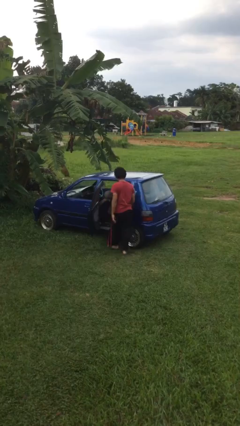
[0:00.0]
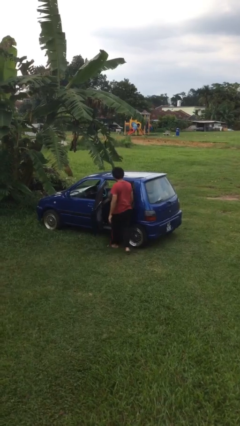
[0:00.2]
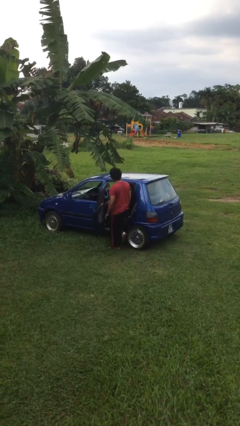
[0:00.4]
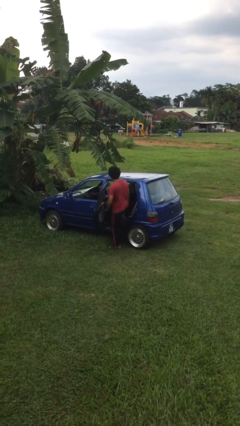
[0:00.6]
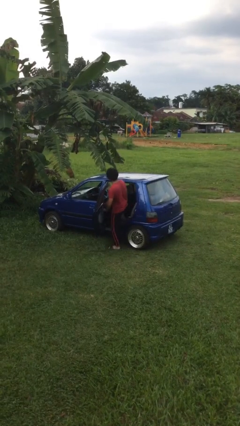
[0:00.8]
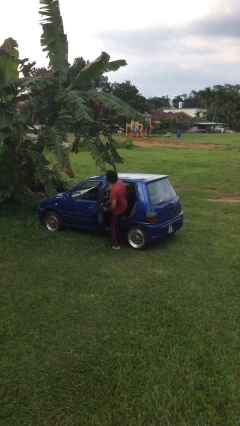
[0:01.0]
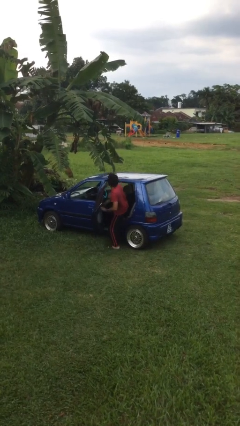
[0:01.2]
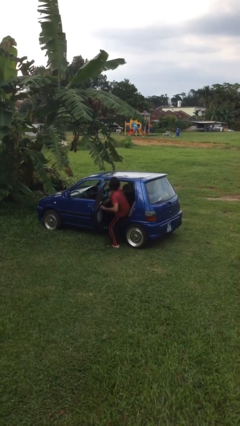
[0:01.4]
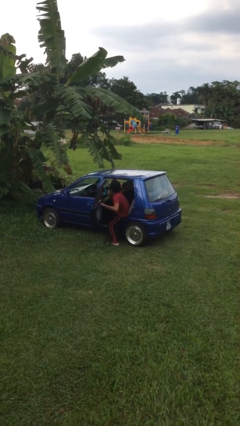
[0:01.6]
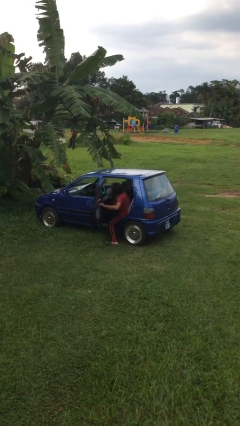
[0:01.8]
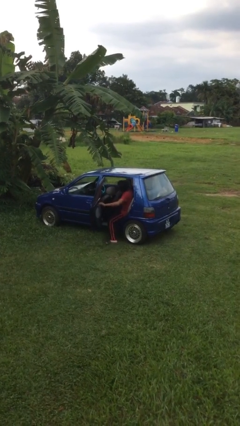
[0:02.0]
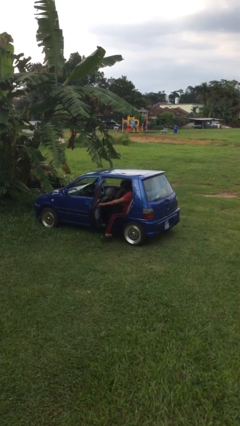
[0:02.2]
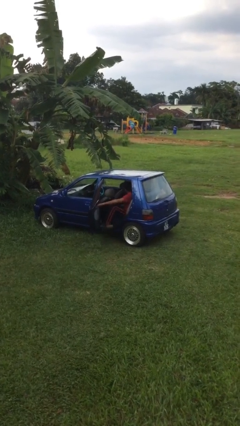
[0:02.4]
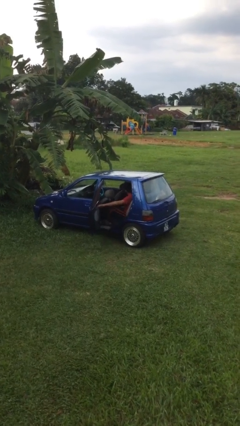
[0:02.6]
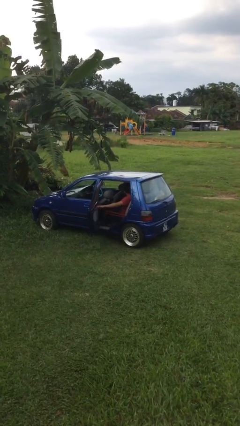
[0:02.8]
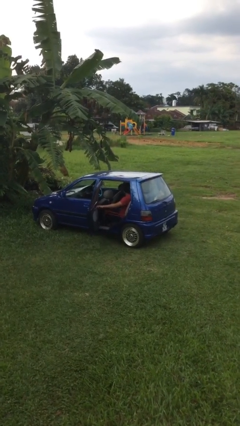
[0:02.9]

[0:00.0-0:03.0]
person enters car

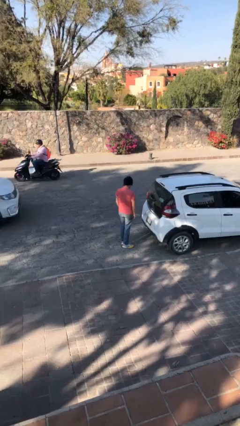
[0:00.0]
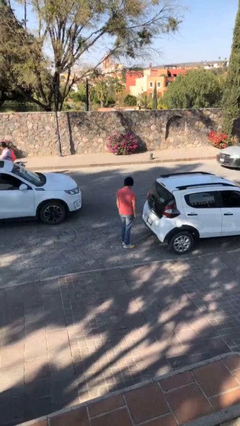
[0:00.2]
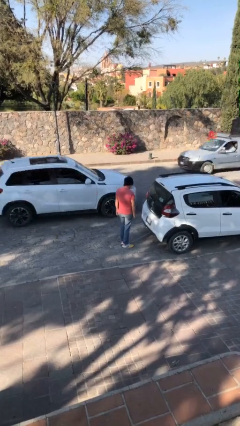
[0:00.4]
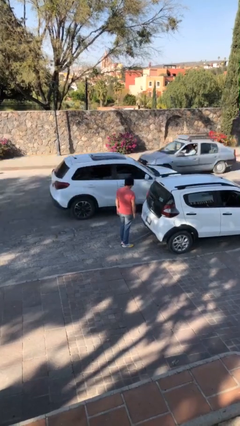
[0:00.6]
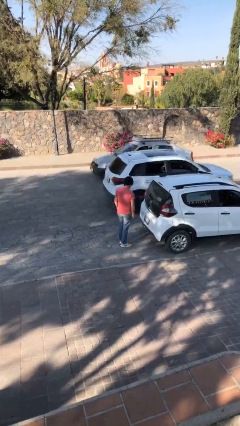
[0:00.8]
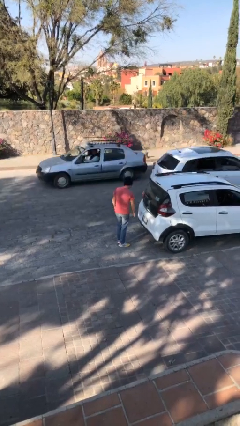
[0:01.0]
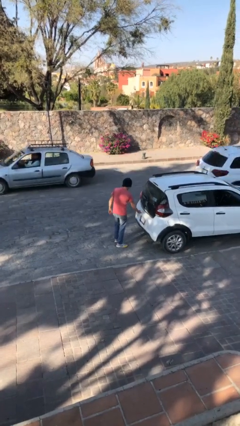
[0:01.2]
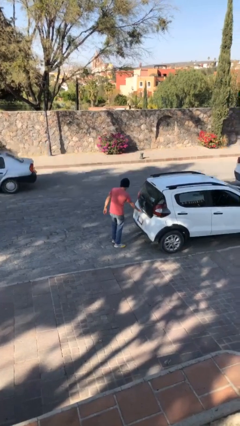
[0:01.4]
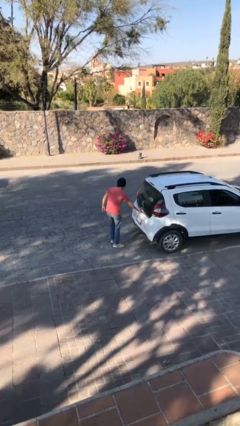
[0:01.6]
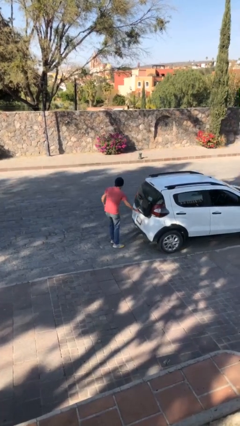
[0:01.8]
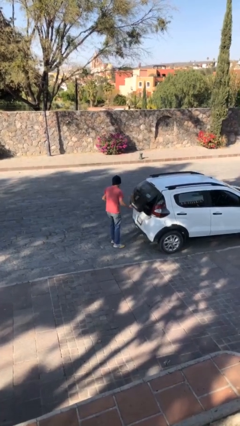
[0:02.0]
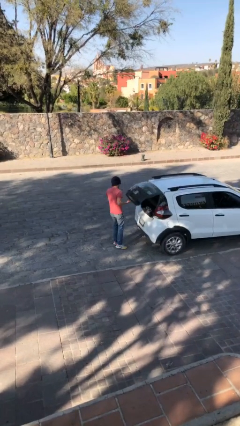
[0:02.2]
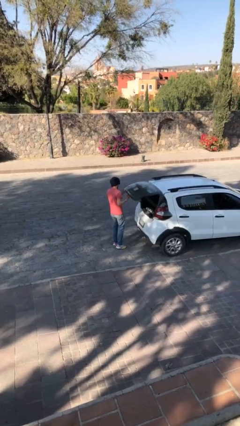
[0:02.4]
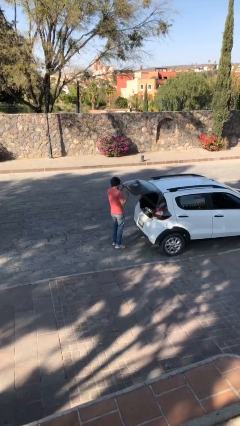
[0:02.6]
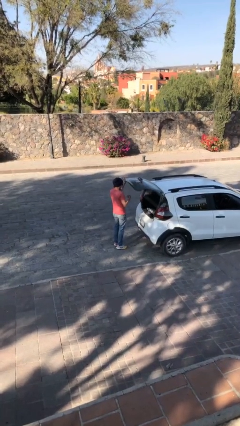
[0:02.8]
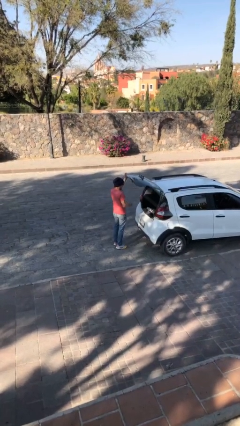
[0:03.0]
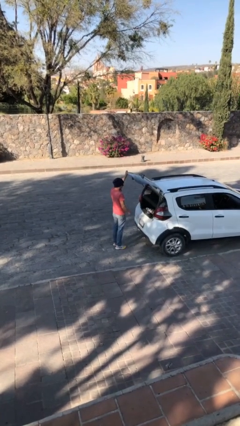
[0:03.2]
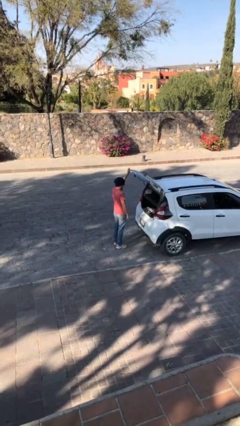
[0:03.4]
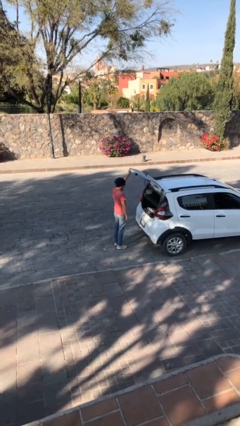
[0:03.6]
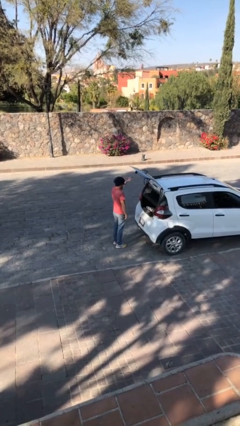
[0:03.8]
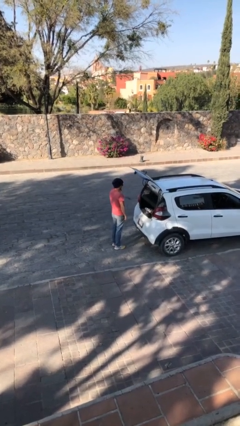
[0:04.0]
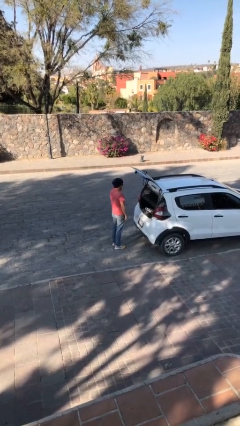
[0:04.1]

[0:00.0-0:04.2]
person opens car trunk

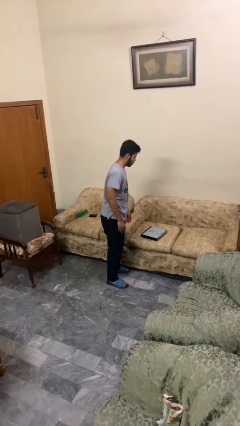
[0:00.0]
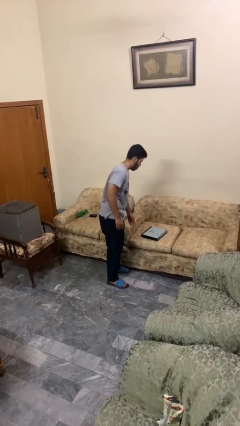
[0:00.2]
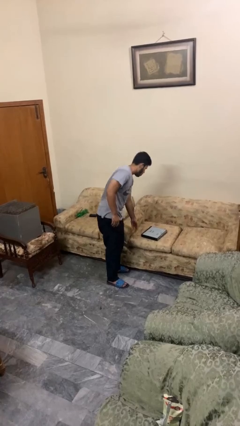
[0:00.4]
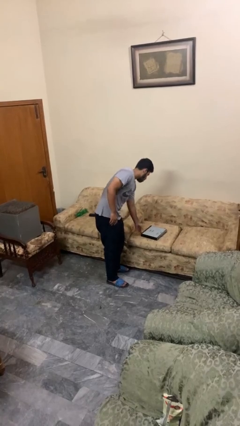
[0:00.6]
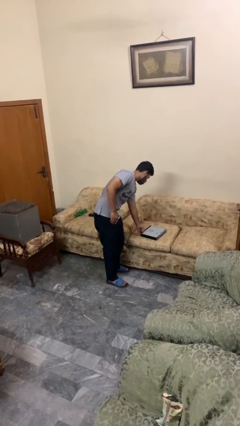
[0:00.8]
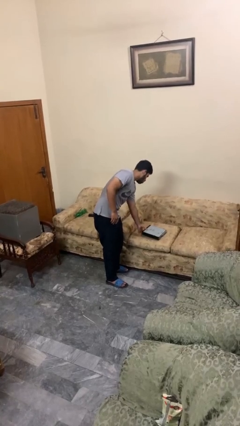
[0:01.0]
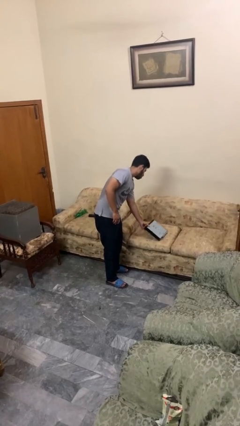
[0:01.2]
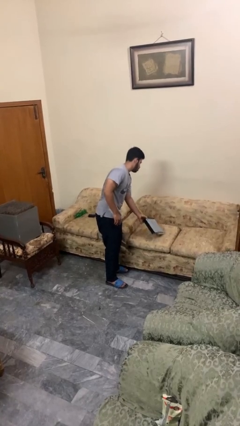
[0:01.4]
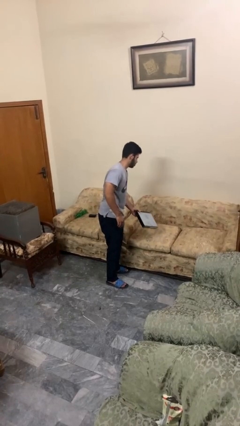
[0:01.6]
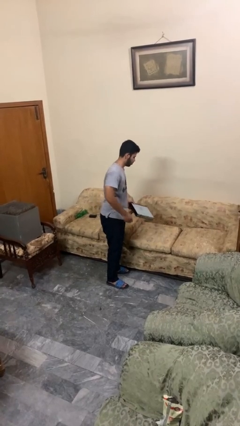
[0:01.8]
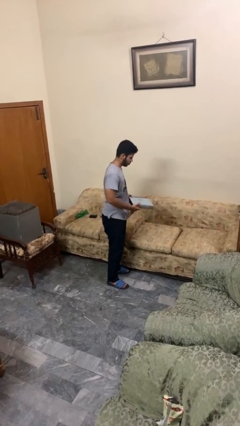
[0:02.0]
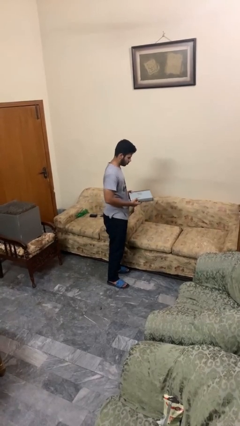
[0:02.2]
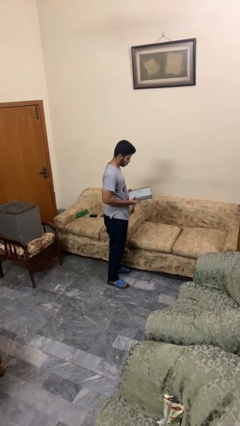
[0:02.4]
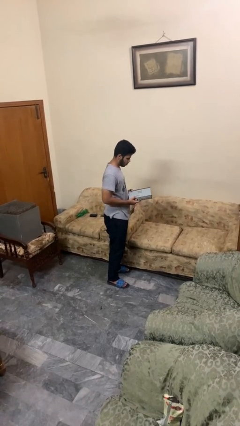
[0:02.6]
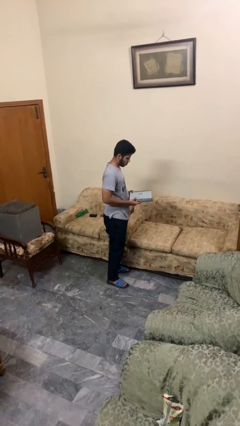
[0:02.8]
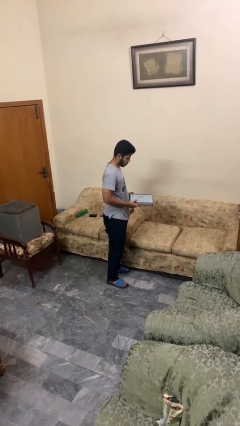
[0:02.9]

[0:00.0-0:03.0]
person picks up object from couch

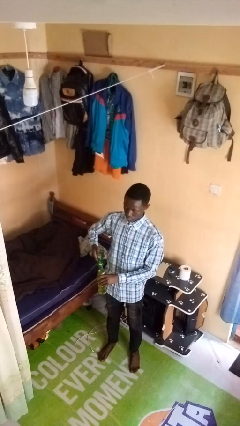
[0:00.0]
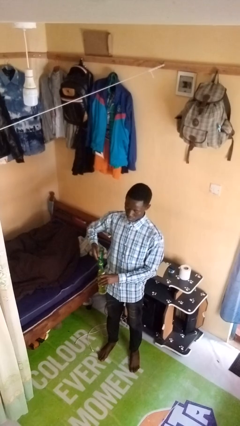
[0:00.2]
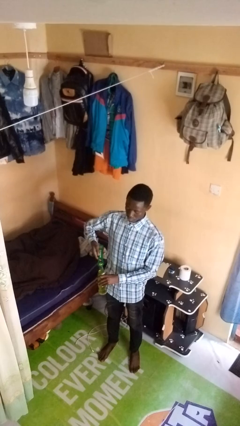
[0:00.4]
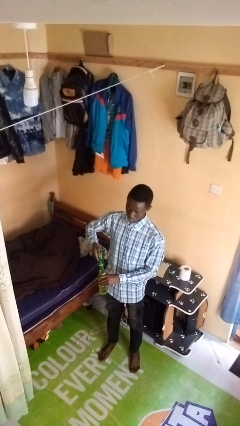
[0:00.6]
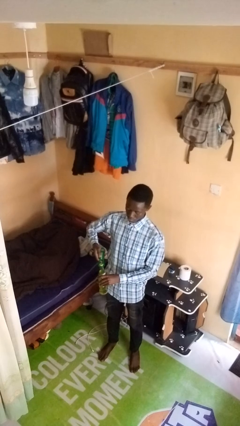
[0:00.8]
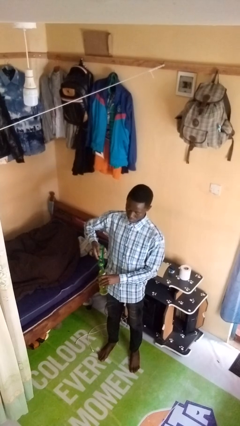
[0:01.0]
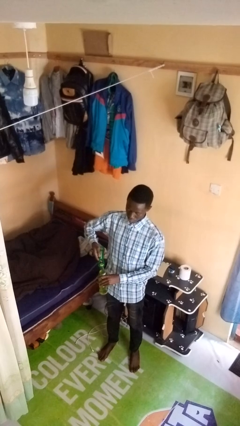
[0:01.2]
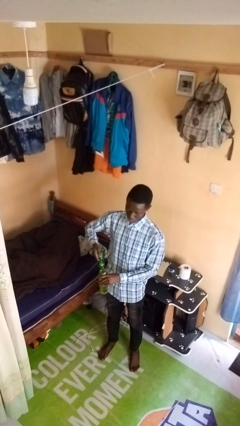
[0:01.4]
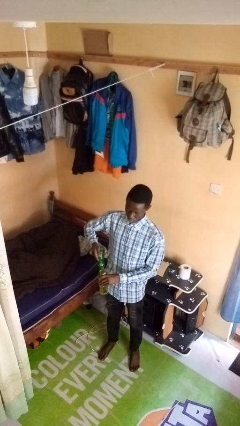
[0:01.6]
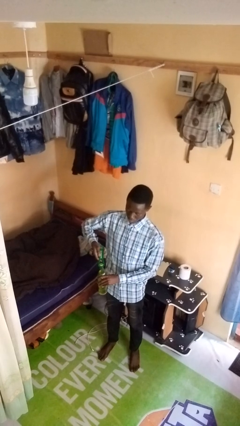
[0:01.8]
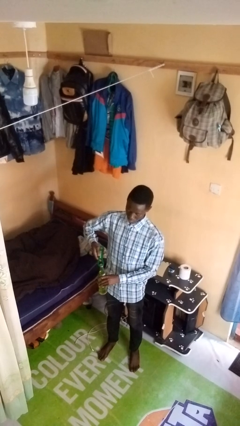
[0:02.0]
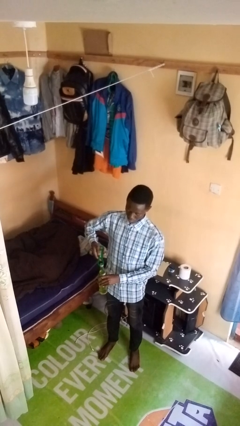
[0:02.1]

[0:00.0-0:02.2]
person opens can with can opener

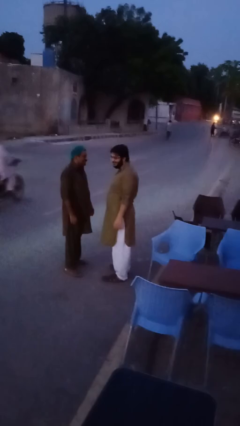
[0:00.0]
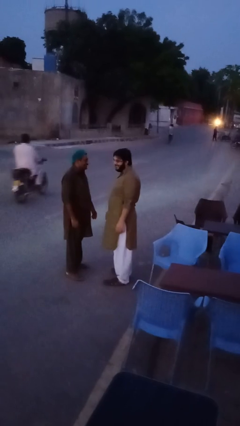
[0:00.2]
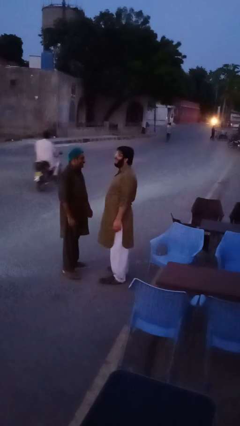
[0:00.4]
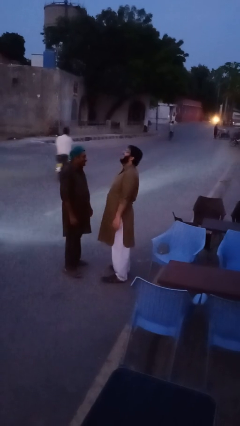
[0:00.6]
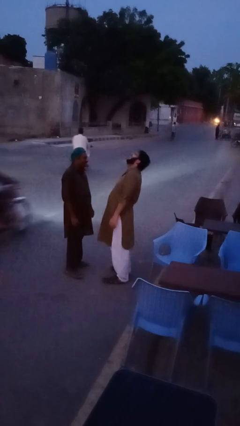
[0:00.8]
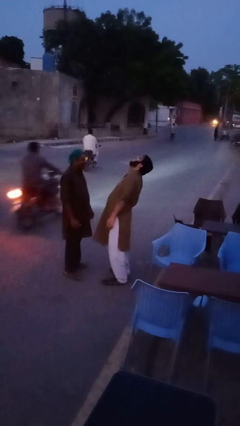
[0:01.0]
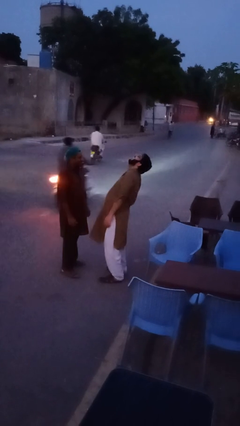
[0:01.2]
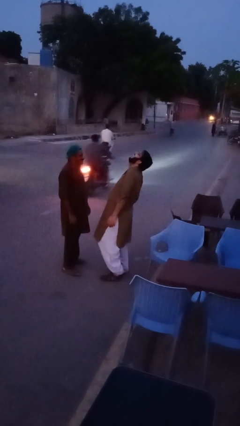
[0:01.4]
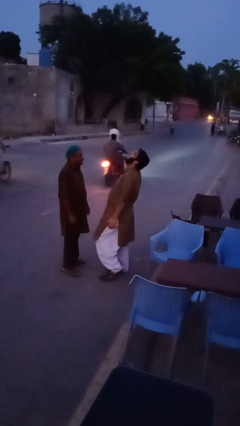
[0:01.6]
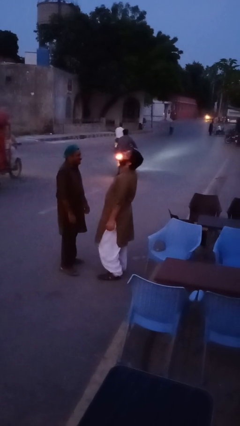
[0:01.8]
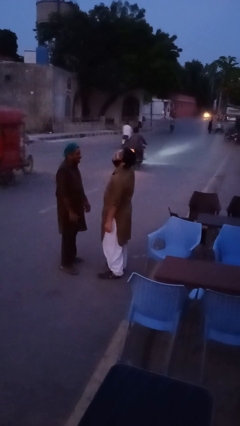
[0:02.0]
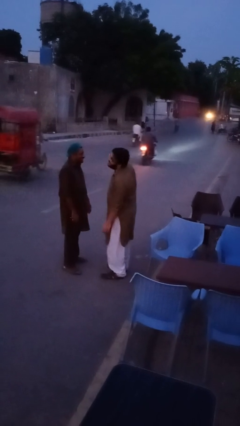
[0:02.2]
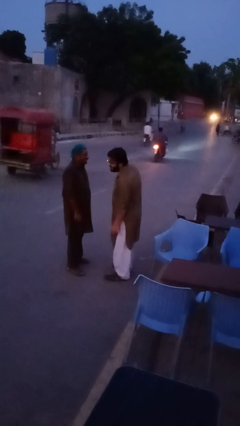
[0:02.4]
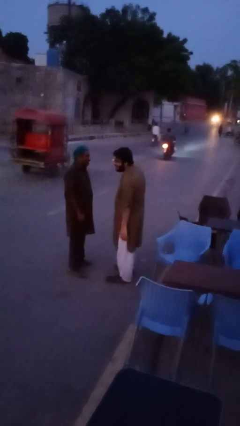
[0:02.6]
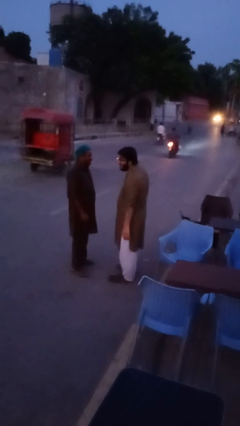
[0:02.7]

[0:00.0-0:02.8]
person laughs with person

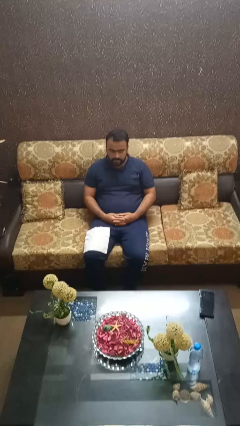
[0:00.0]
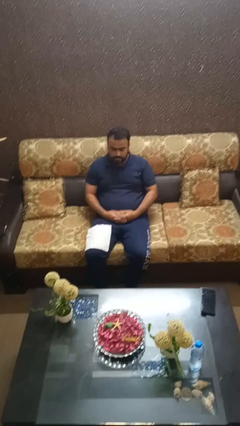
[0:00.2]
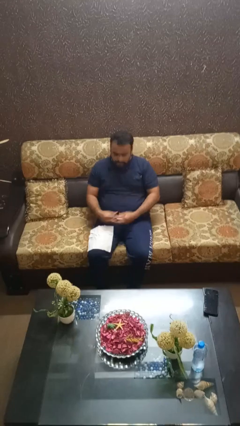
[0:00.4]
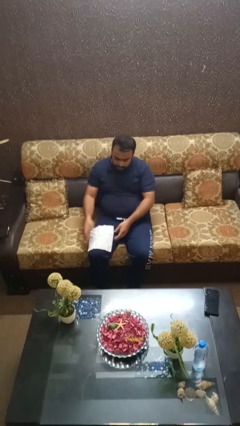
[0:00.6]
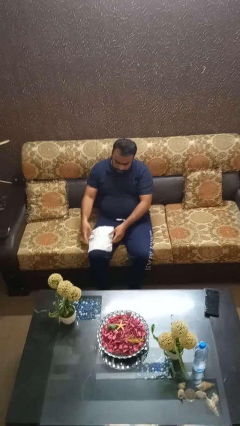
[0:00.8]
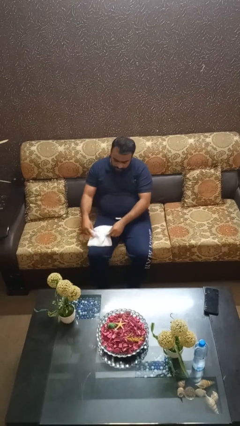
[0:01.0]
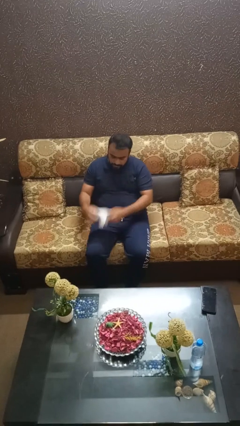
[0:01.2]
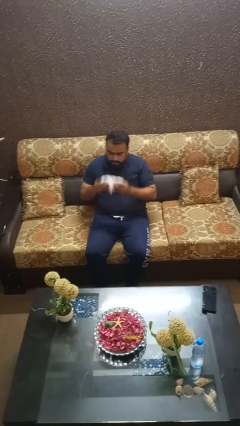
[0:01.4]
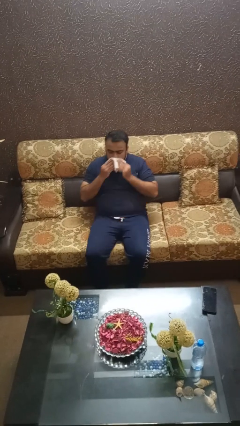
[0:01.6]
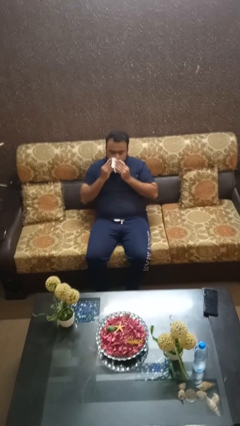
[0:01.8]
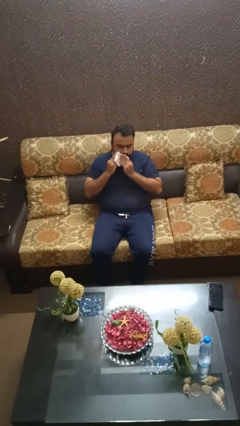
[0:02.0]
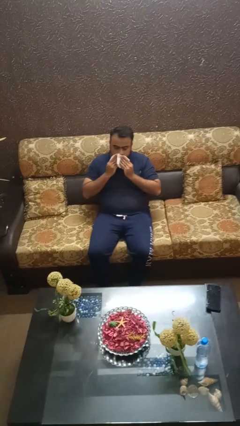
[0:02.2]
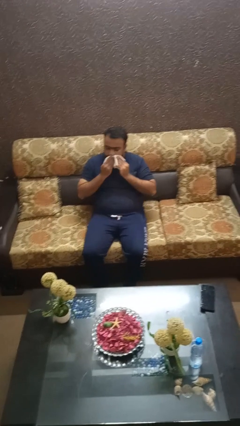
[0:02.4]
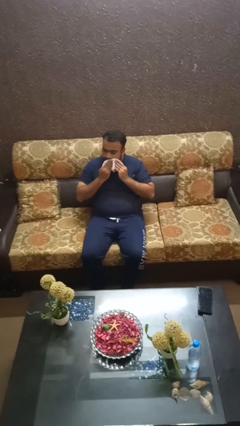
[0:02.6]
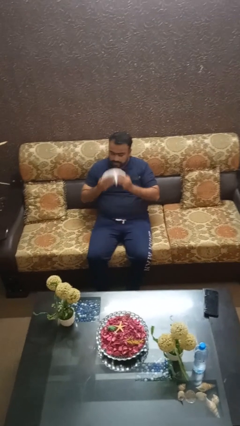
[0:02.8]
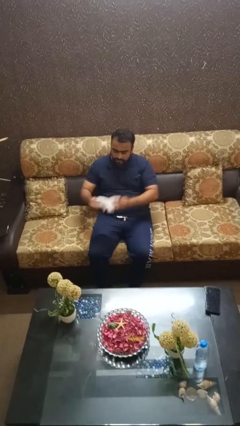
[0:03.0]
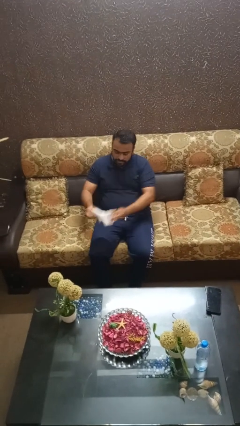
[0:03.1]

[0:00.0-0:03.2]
person wipes mouth with napkin
